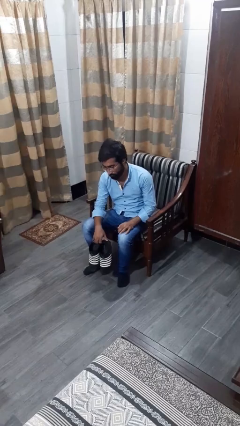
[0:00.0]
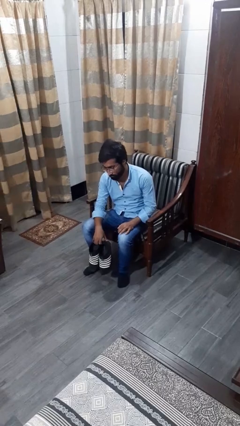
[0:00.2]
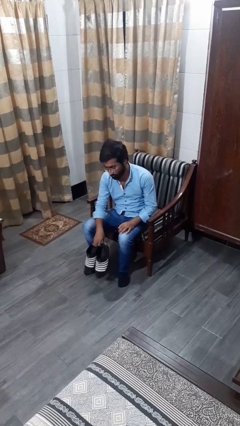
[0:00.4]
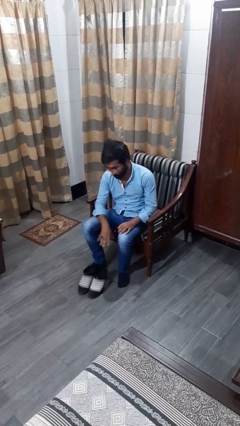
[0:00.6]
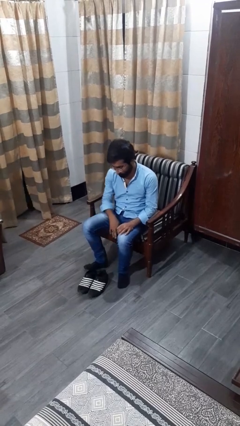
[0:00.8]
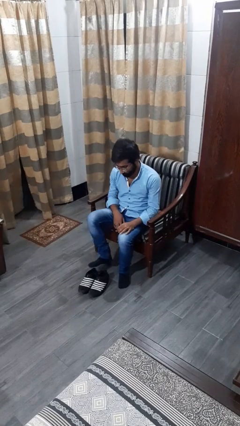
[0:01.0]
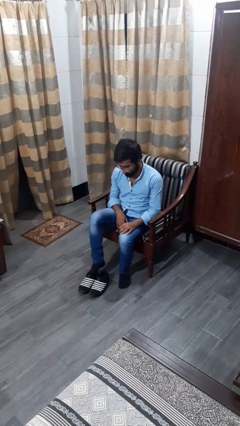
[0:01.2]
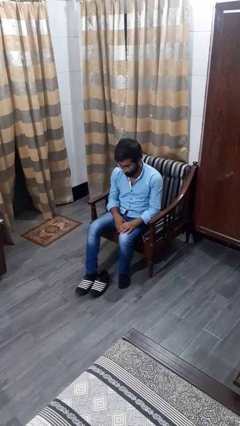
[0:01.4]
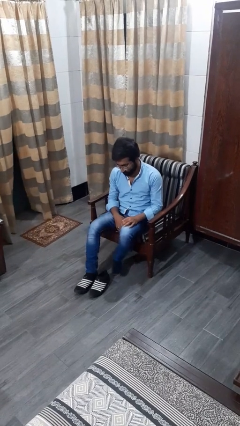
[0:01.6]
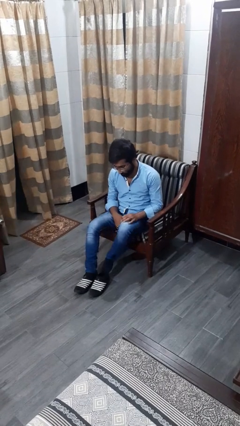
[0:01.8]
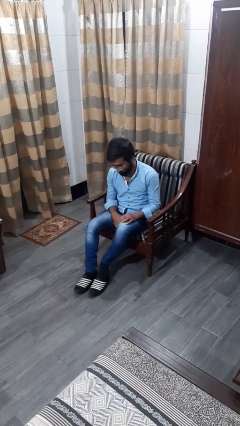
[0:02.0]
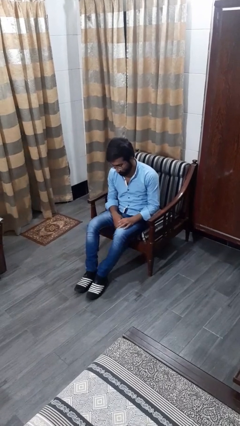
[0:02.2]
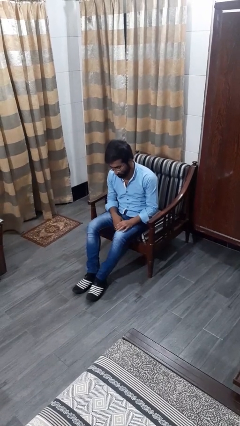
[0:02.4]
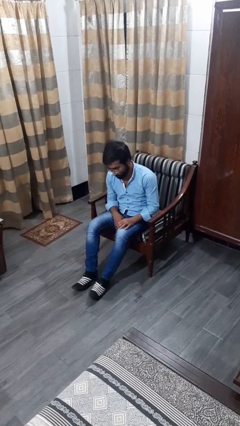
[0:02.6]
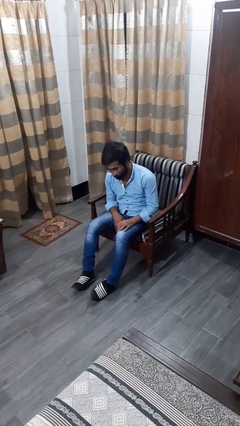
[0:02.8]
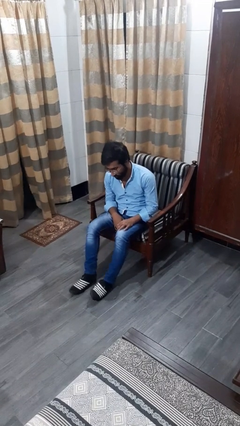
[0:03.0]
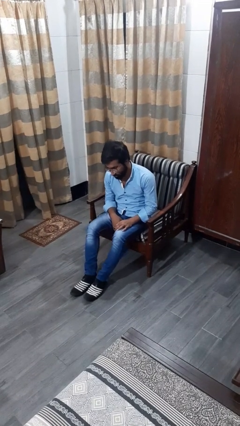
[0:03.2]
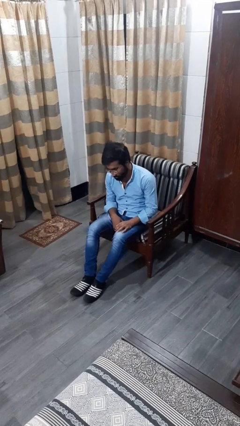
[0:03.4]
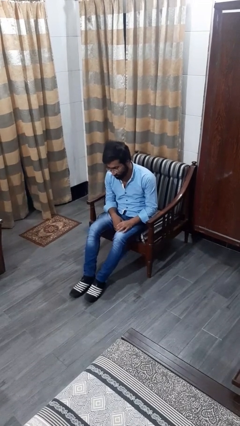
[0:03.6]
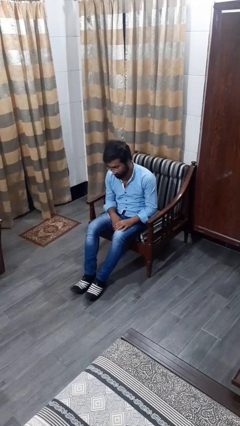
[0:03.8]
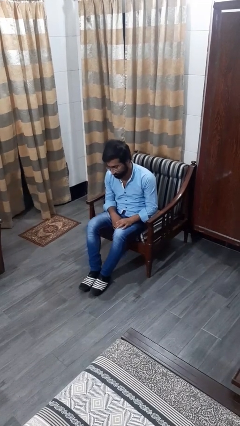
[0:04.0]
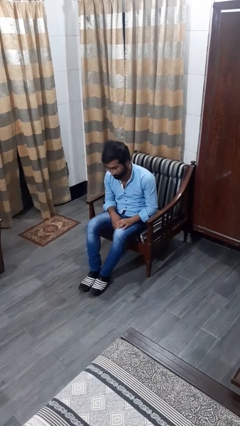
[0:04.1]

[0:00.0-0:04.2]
person puts on shoes

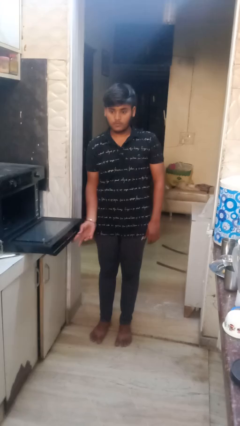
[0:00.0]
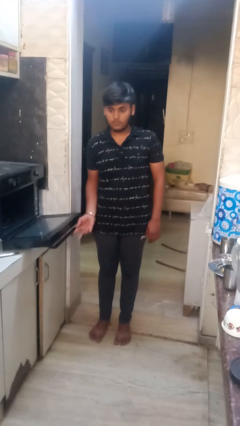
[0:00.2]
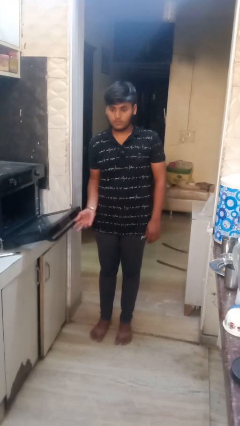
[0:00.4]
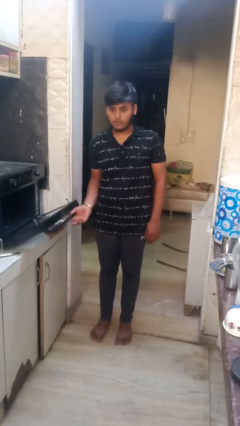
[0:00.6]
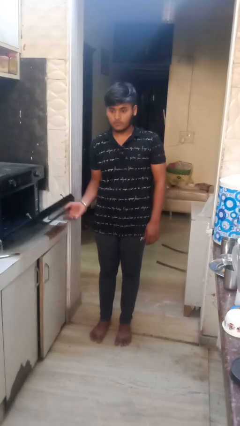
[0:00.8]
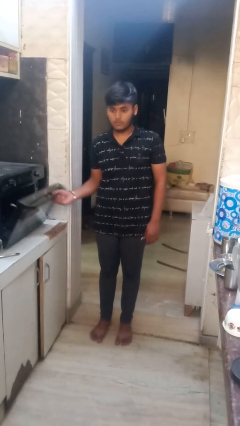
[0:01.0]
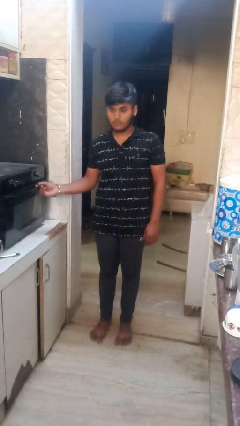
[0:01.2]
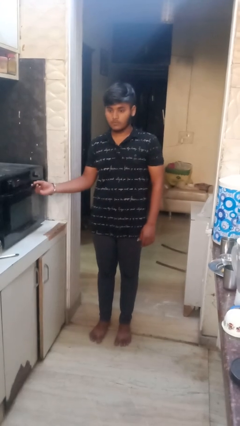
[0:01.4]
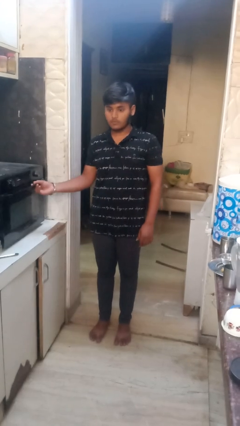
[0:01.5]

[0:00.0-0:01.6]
person closes oven door

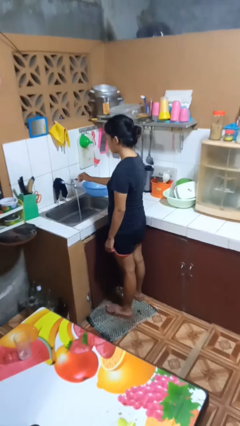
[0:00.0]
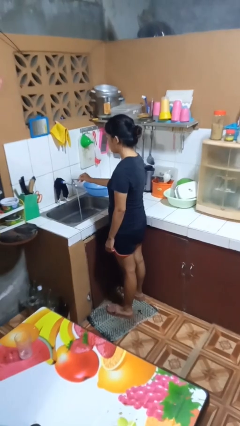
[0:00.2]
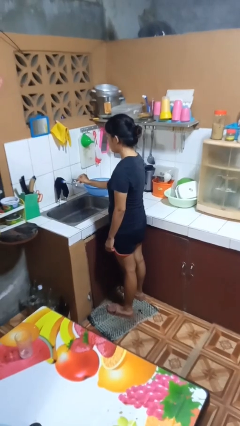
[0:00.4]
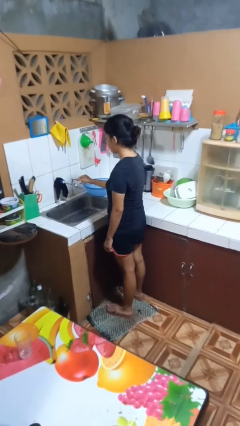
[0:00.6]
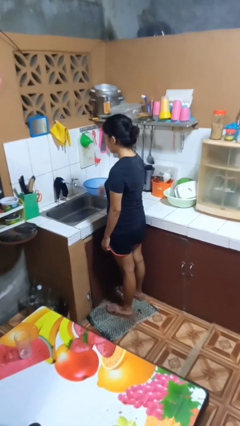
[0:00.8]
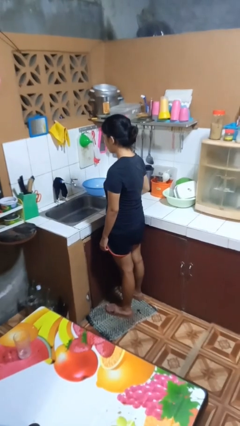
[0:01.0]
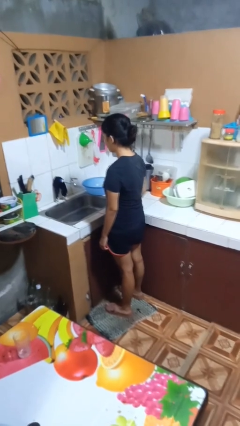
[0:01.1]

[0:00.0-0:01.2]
person turns off faucet

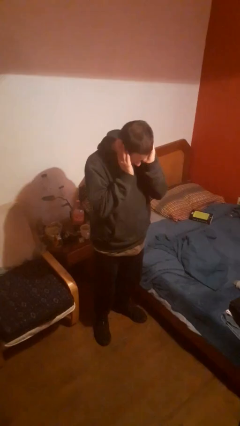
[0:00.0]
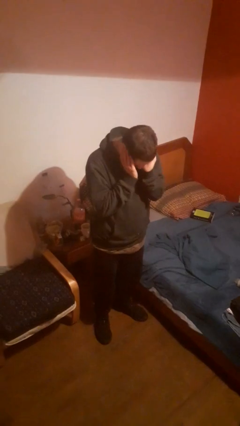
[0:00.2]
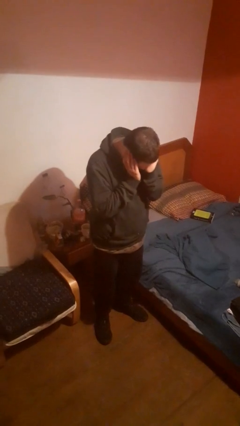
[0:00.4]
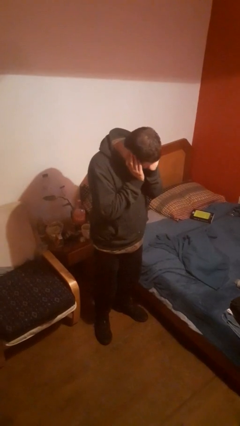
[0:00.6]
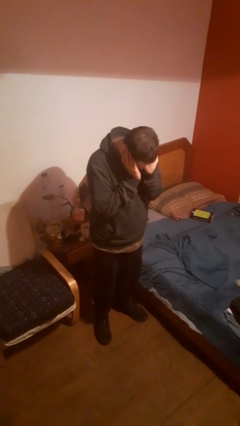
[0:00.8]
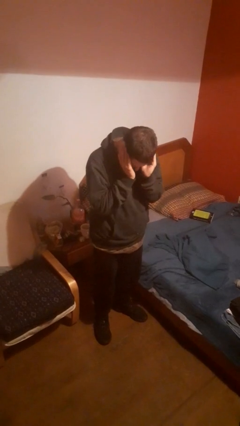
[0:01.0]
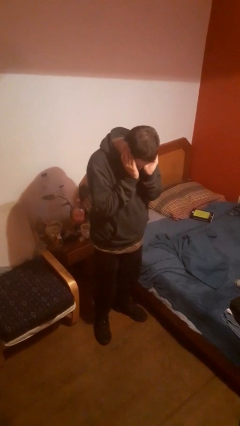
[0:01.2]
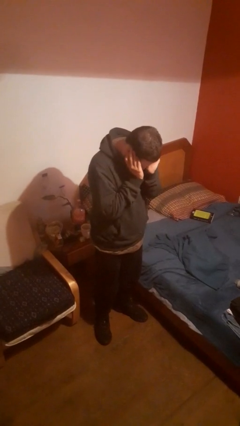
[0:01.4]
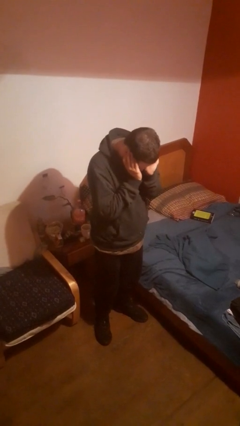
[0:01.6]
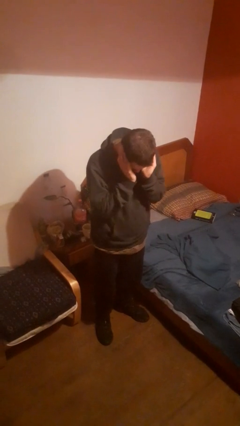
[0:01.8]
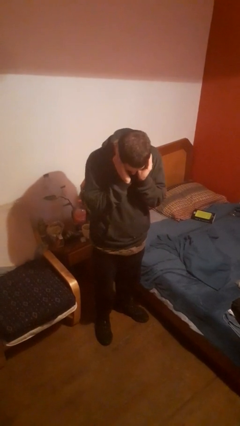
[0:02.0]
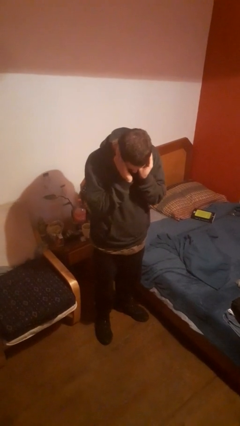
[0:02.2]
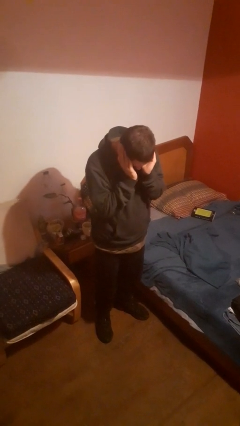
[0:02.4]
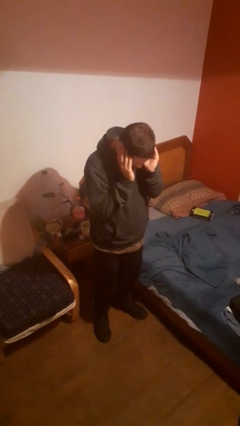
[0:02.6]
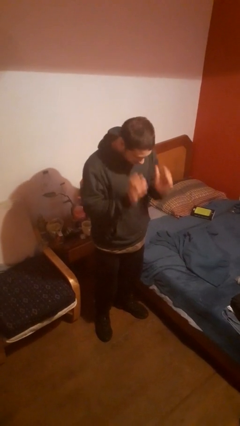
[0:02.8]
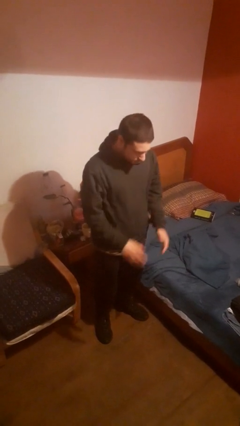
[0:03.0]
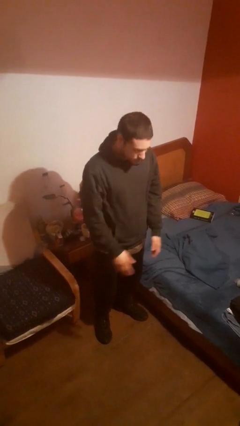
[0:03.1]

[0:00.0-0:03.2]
person puts fingers in ear

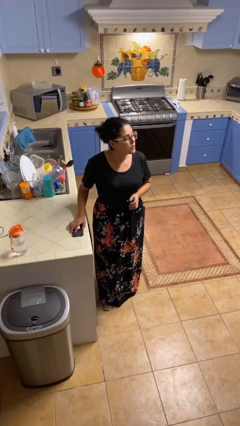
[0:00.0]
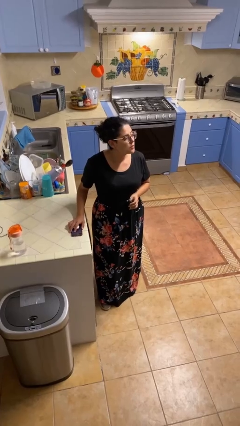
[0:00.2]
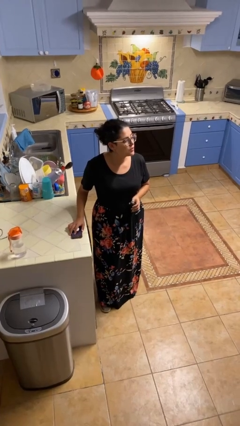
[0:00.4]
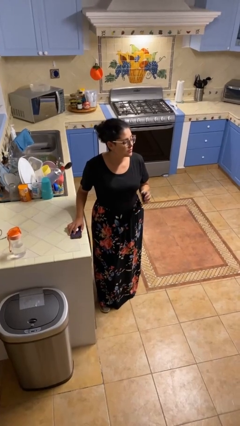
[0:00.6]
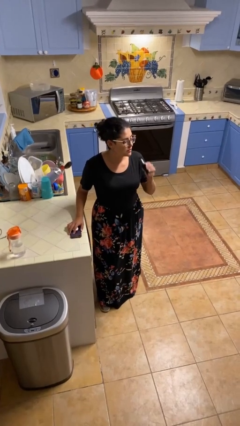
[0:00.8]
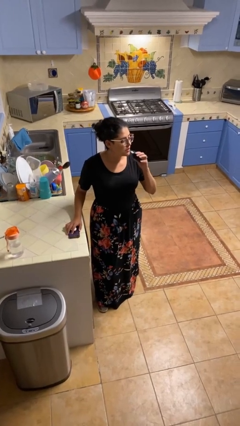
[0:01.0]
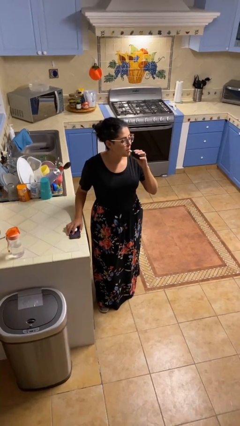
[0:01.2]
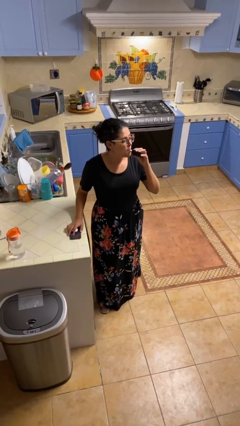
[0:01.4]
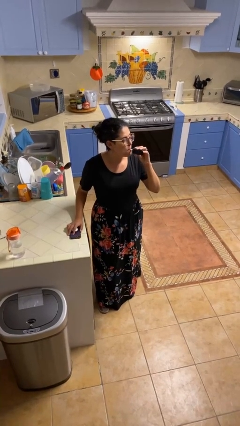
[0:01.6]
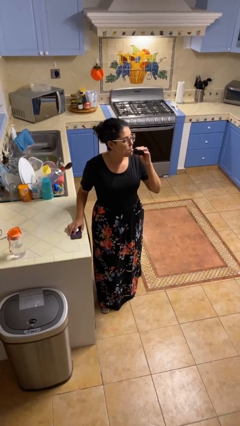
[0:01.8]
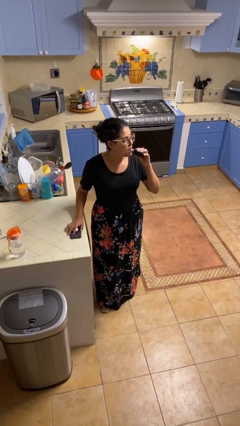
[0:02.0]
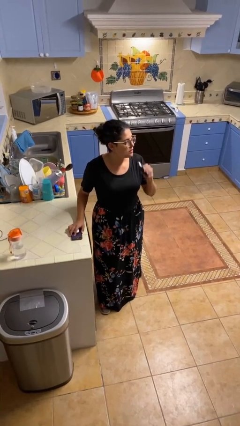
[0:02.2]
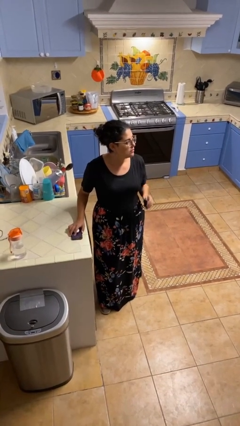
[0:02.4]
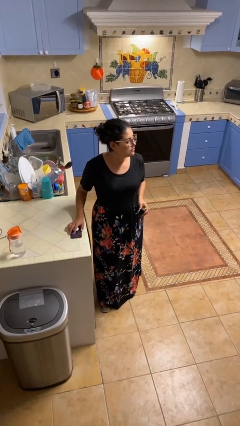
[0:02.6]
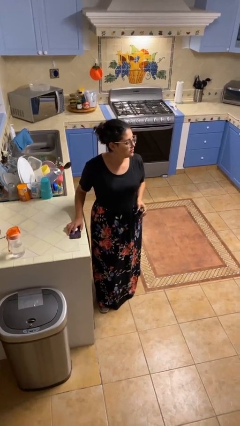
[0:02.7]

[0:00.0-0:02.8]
person vapes

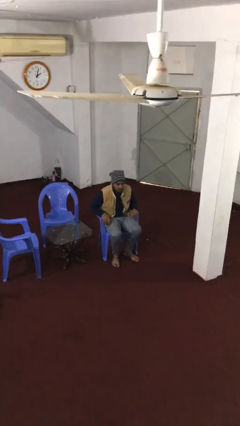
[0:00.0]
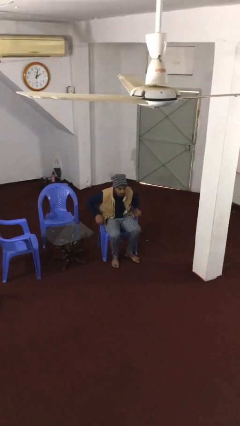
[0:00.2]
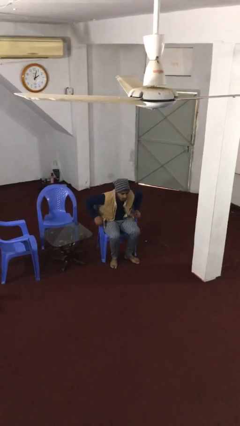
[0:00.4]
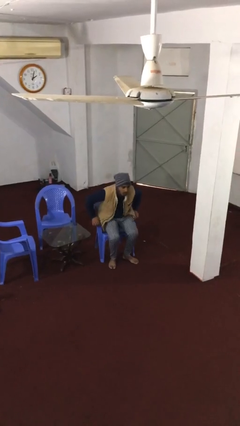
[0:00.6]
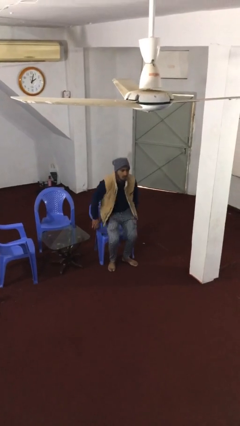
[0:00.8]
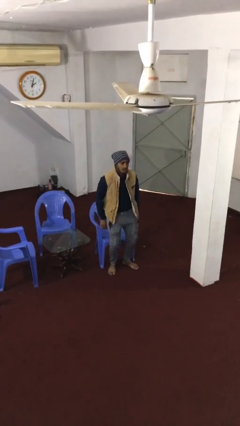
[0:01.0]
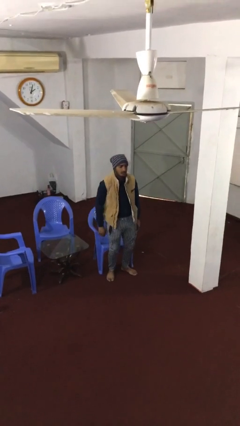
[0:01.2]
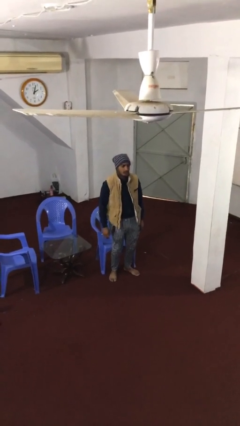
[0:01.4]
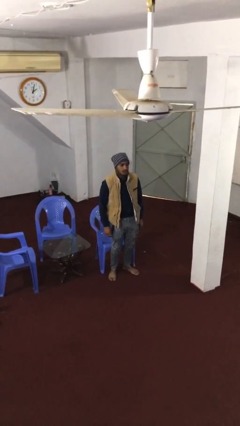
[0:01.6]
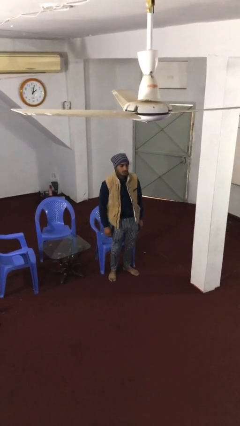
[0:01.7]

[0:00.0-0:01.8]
person stands up

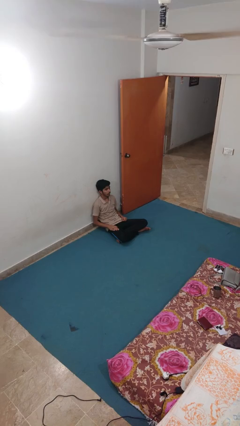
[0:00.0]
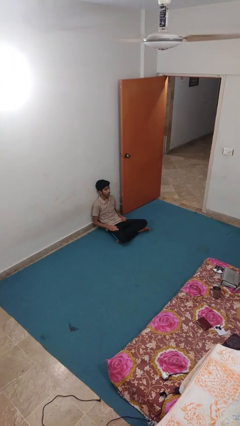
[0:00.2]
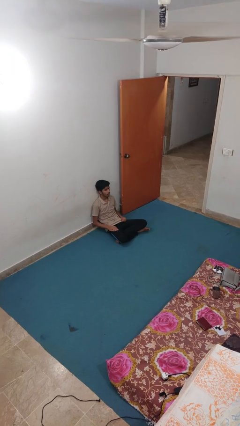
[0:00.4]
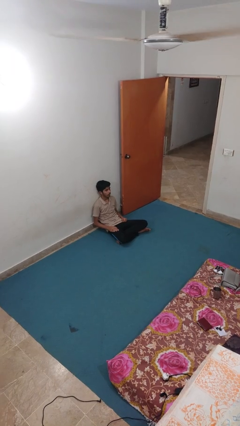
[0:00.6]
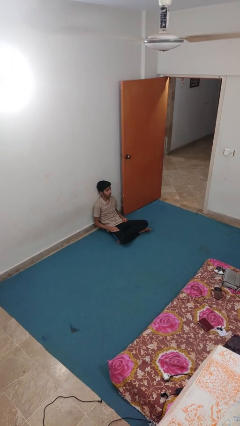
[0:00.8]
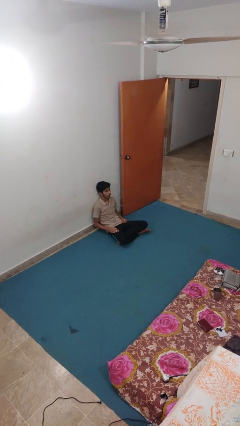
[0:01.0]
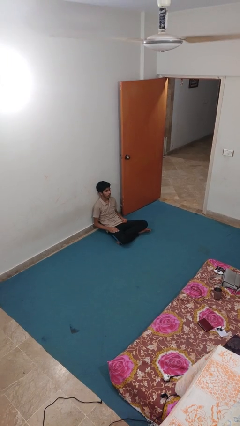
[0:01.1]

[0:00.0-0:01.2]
person slaps hands on thighs

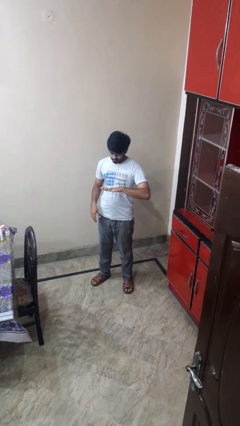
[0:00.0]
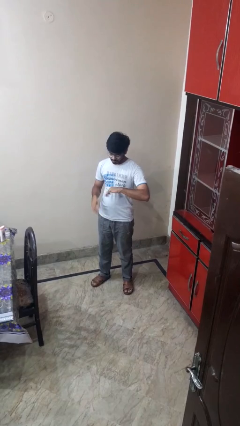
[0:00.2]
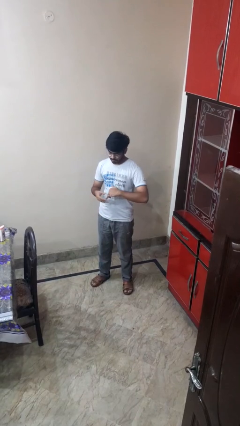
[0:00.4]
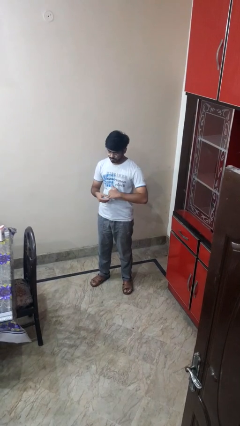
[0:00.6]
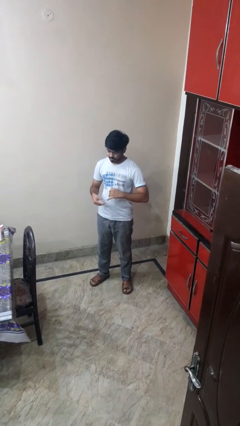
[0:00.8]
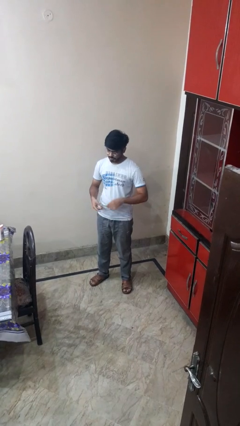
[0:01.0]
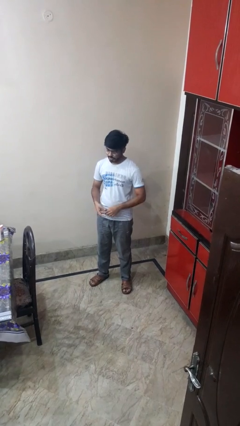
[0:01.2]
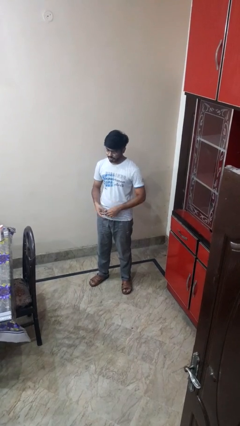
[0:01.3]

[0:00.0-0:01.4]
person takes off ring
